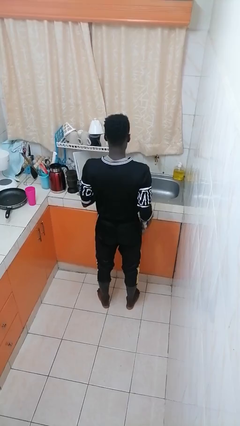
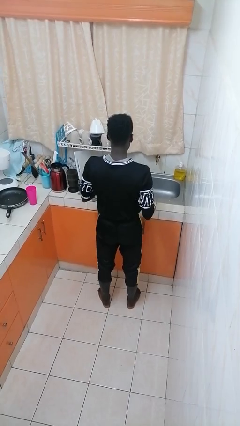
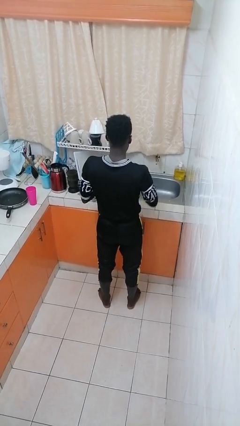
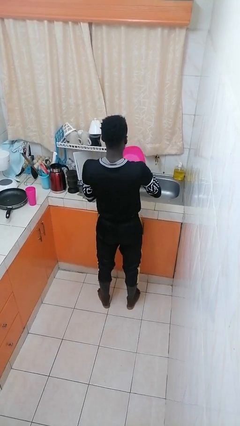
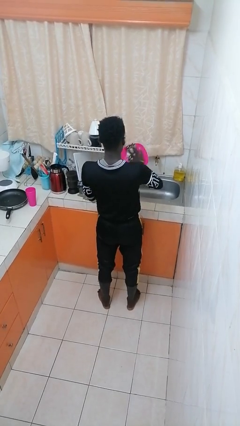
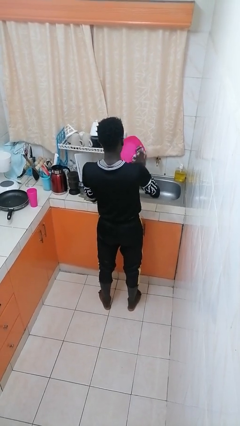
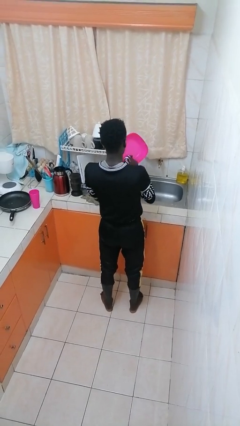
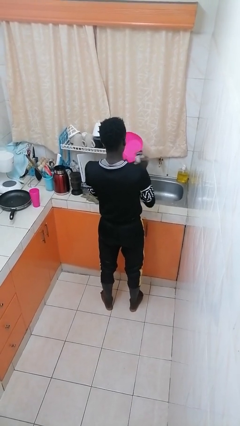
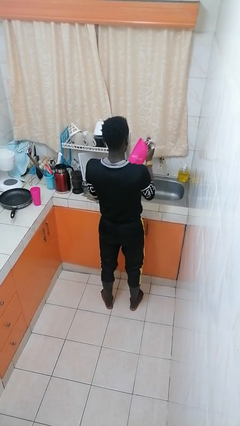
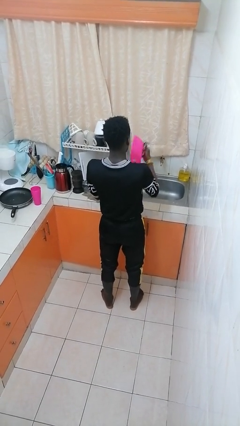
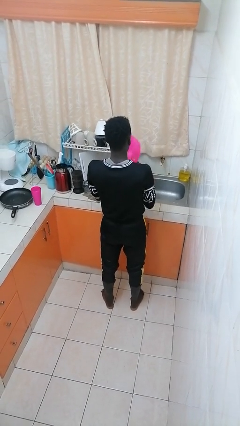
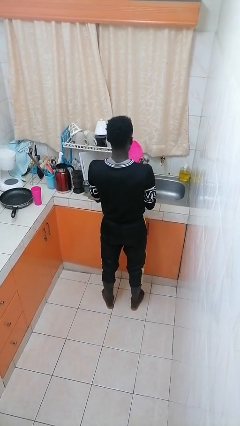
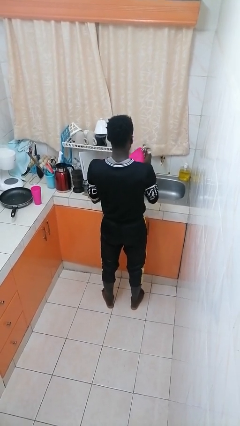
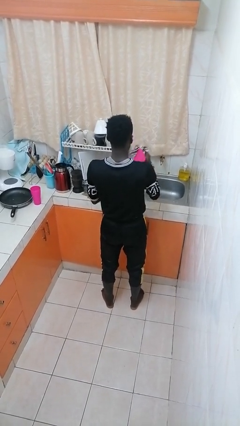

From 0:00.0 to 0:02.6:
person dries dish

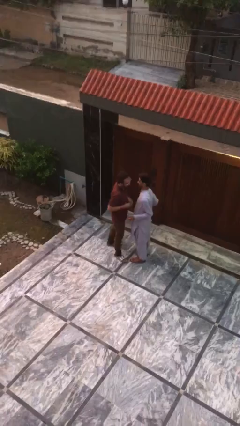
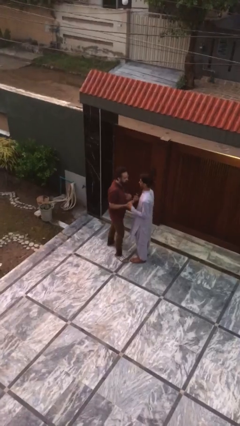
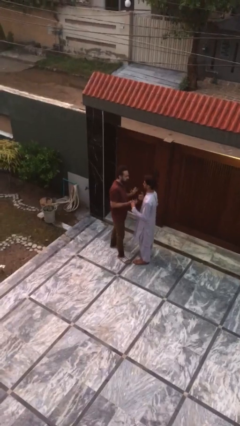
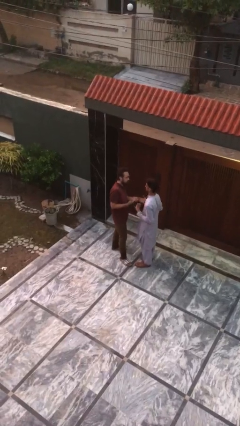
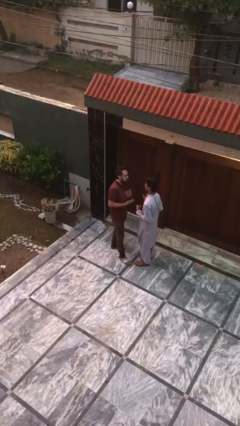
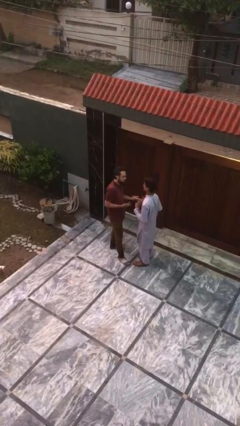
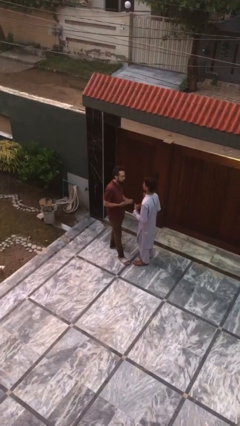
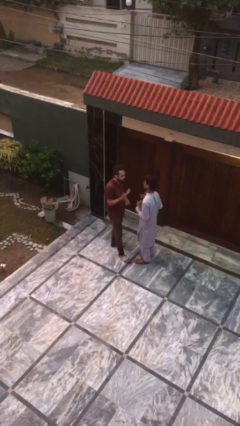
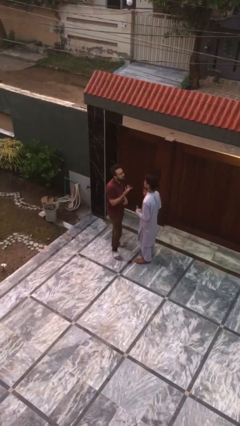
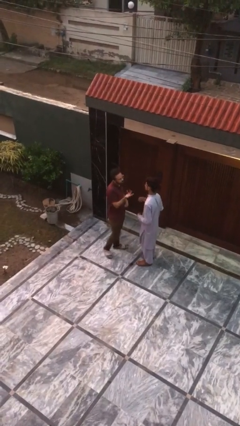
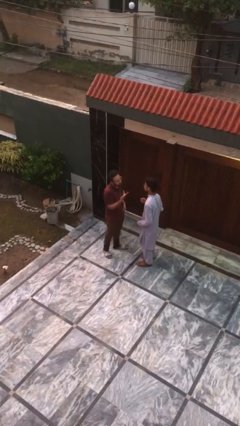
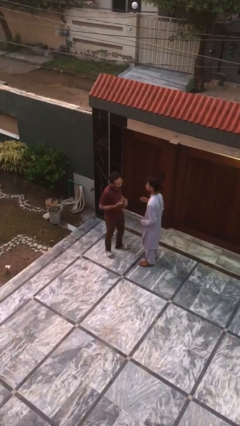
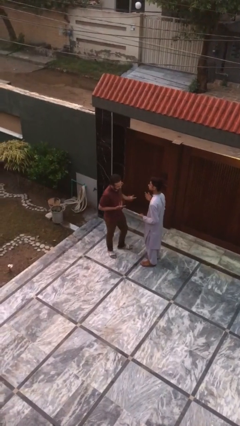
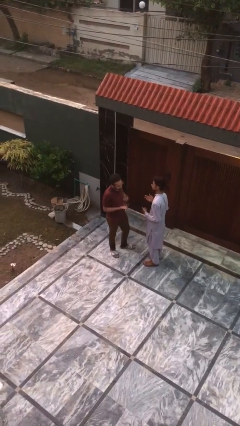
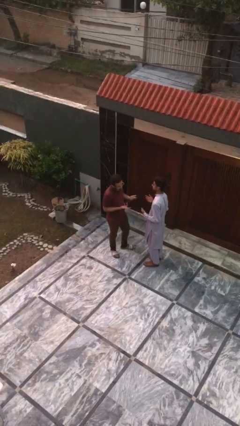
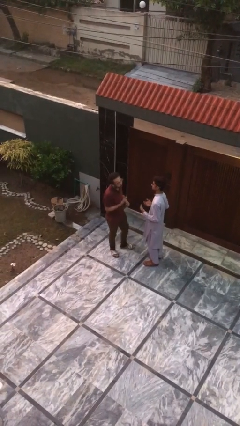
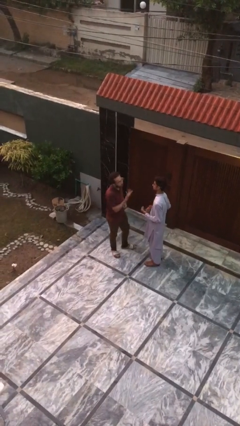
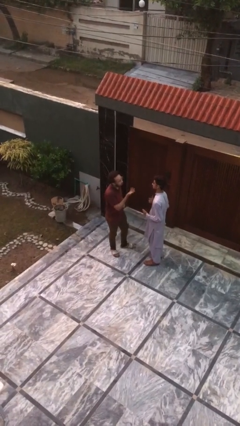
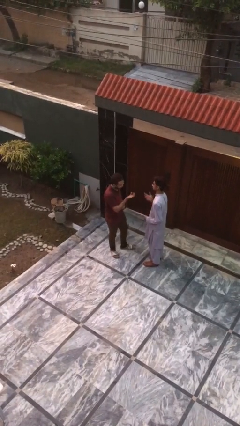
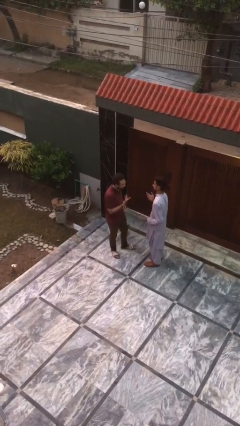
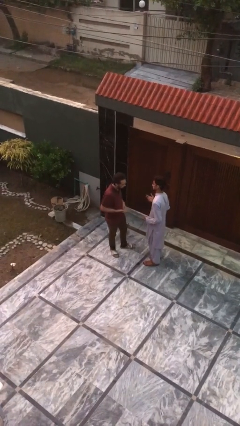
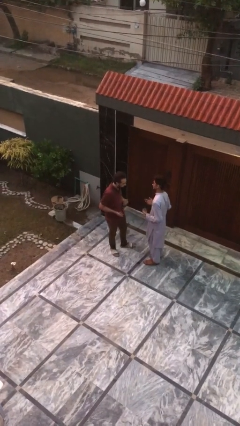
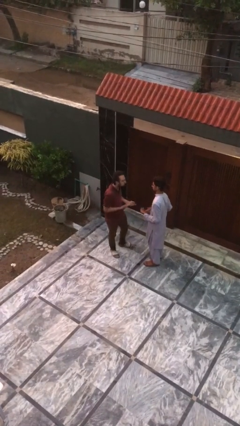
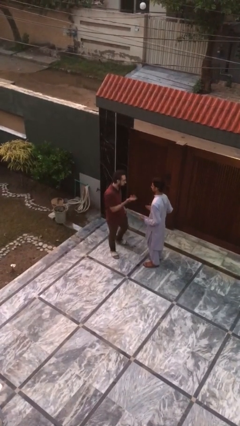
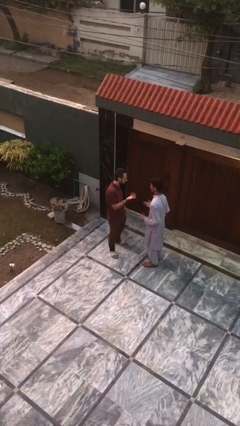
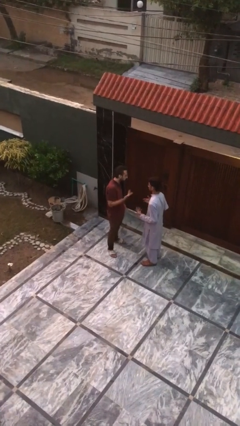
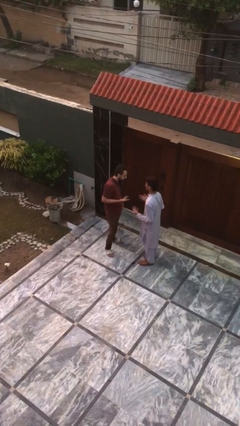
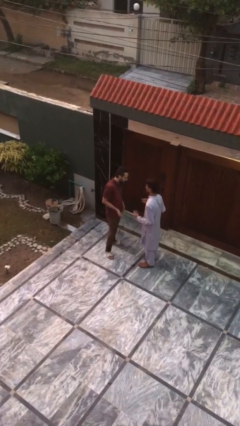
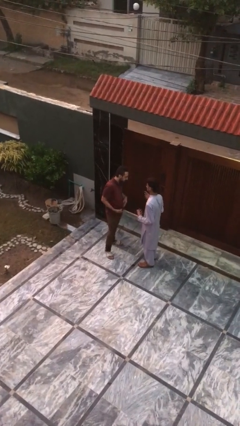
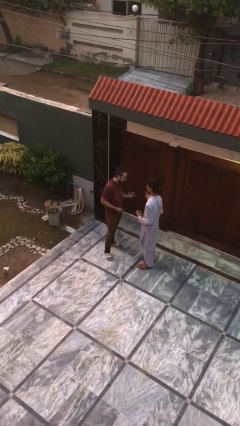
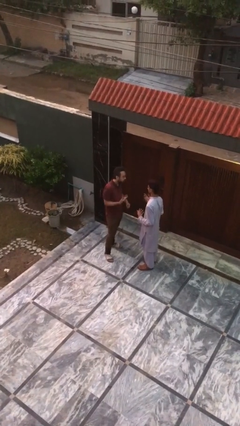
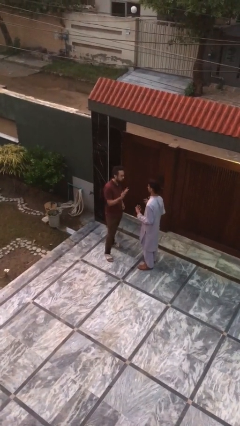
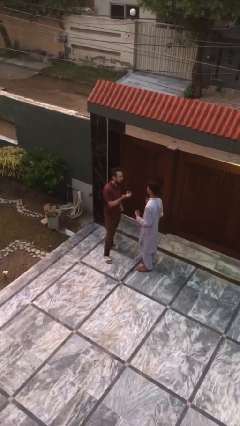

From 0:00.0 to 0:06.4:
person talks to person

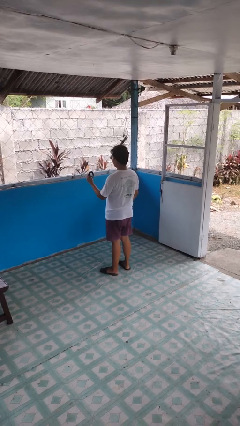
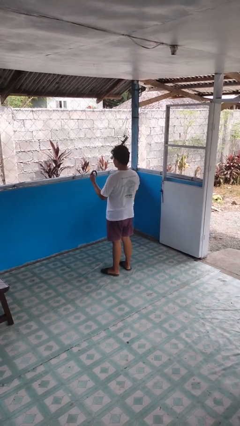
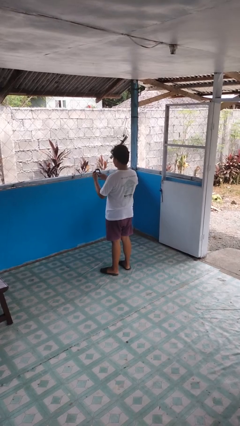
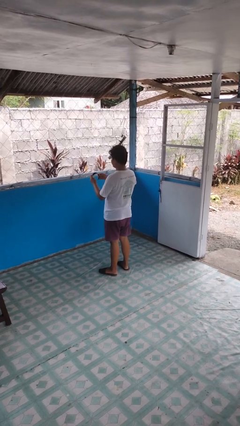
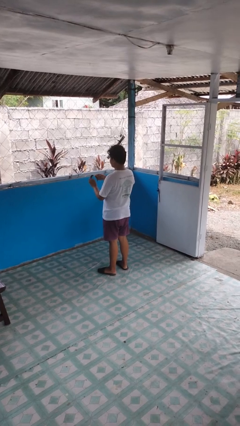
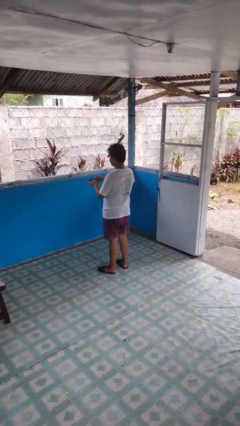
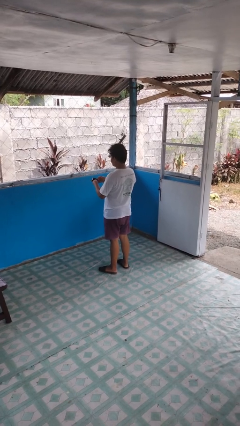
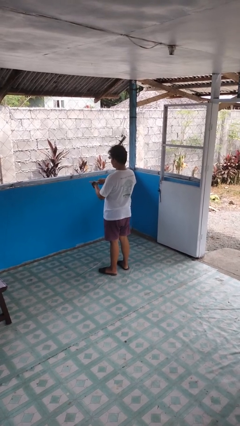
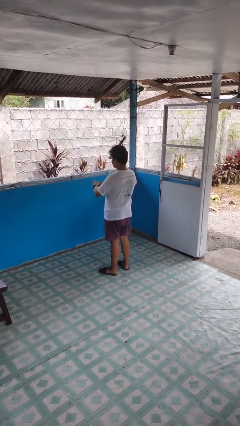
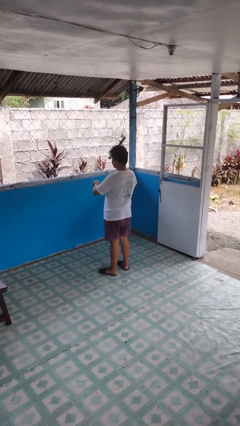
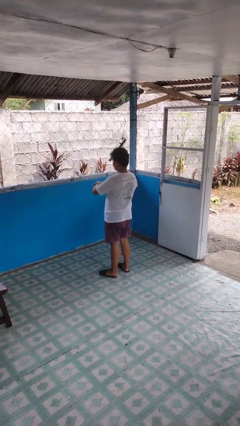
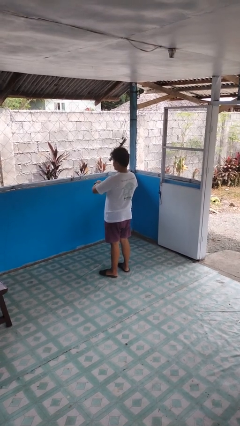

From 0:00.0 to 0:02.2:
person puts on wristwatch

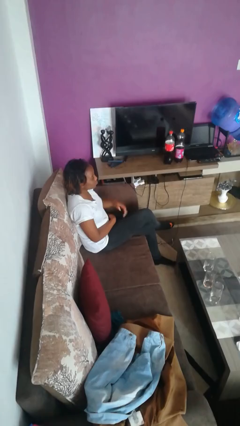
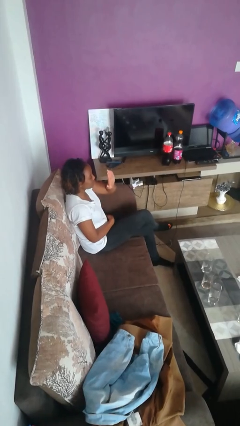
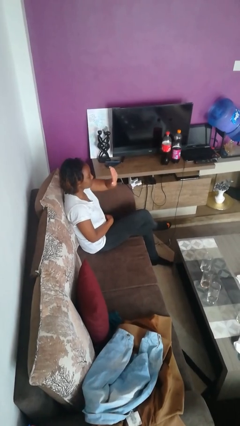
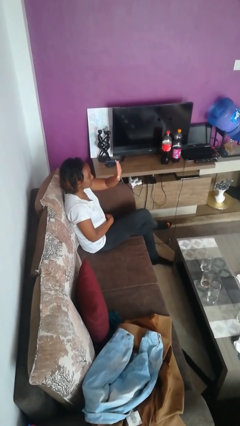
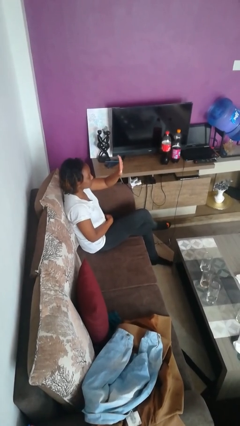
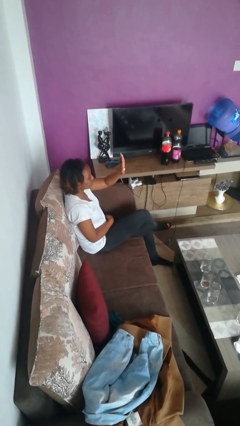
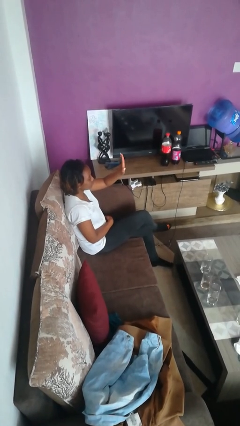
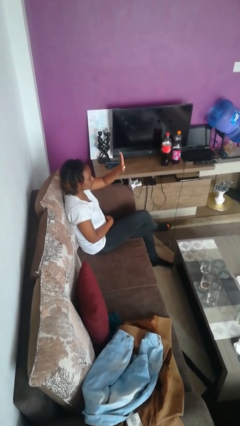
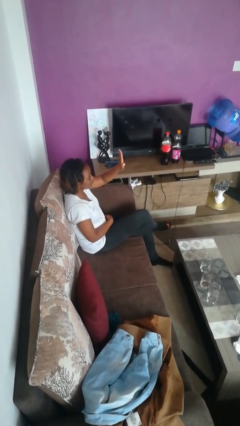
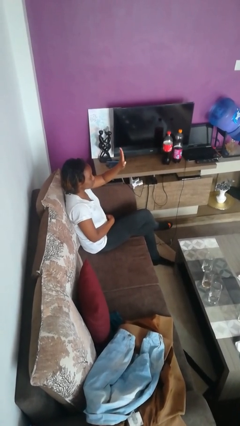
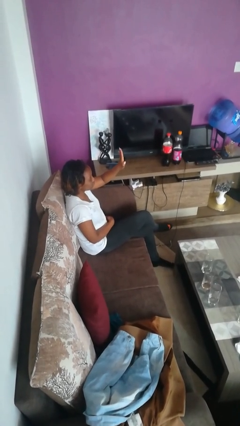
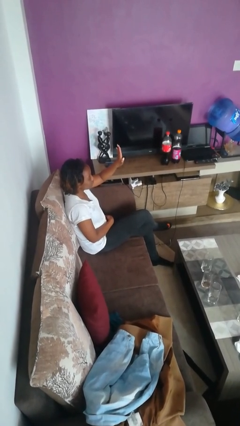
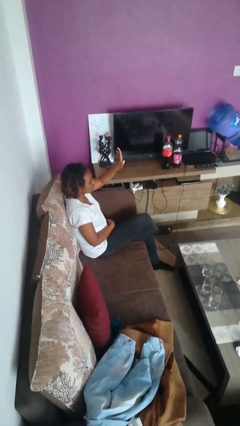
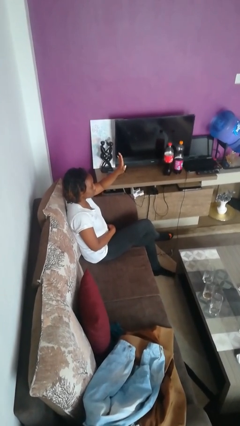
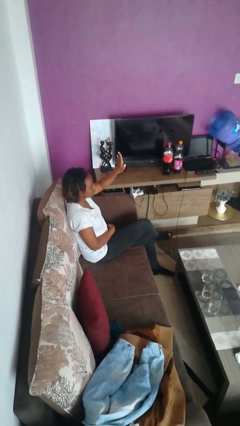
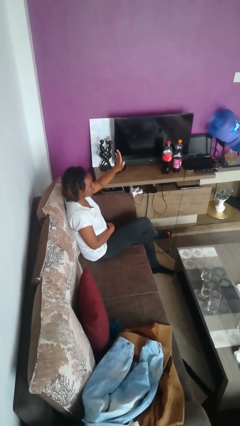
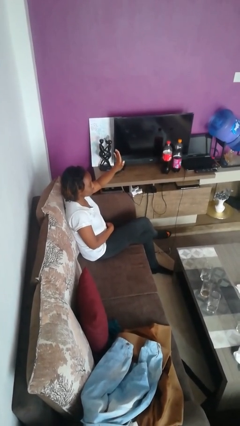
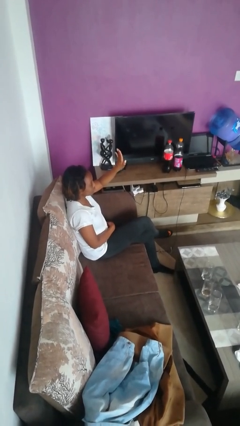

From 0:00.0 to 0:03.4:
person gestures swipe left

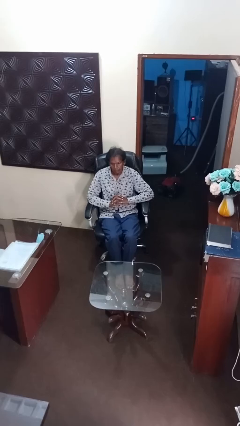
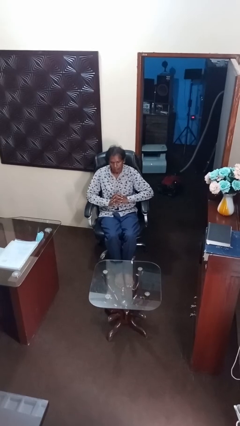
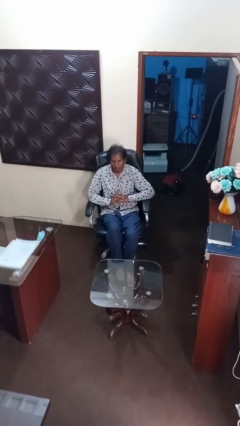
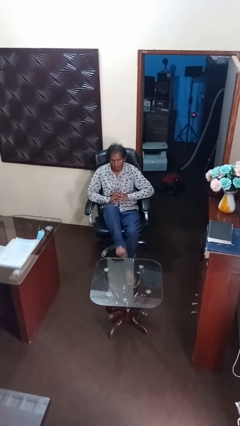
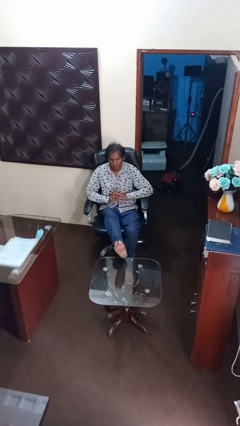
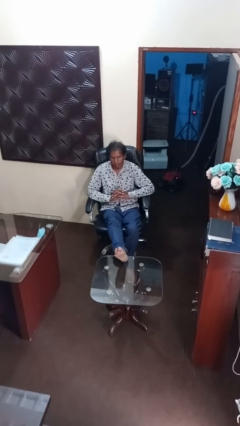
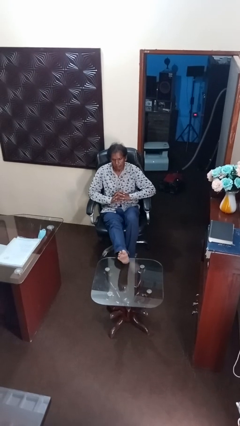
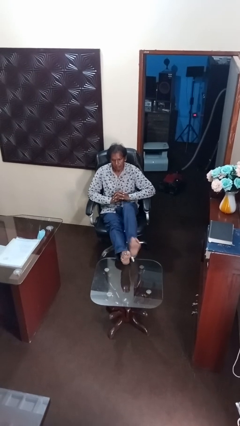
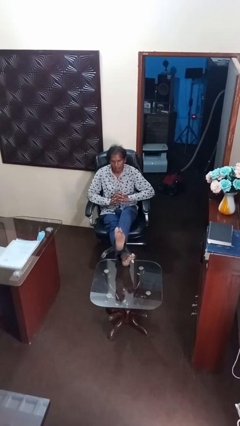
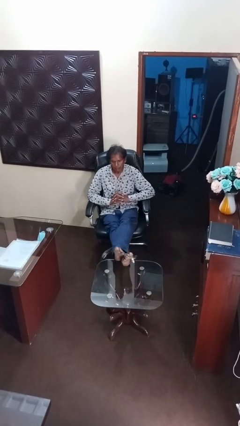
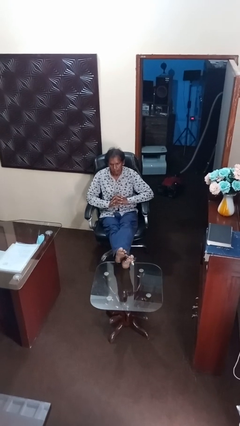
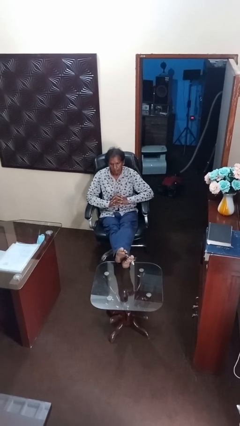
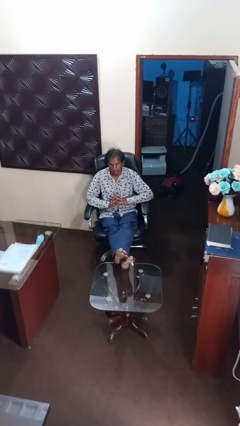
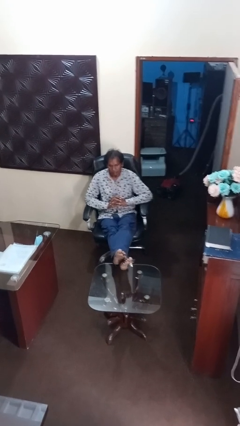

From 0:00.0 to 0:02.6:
person puts feet up
